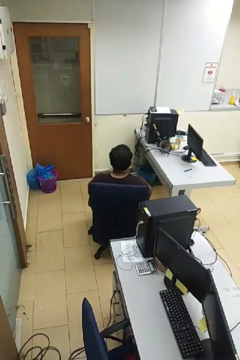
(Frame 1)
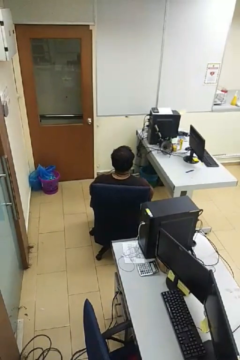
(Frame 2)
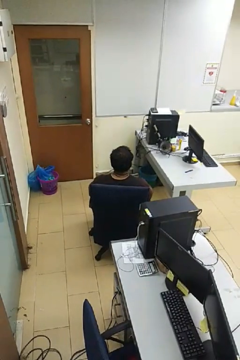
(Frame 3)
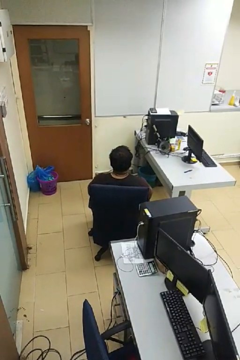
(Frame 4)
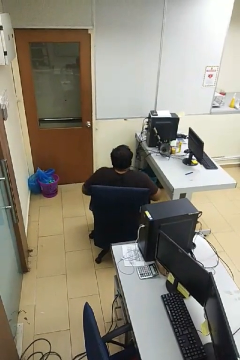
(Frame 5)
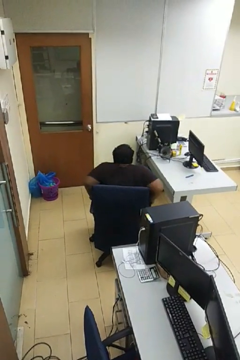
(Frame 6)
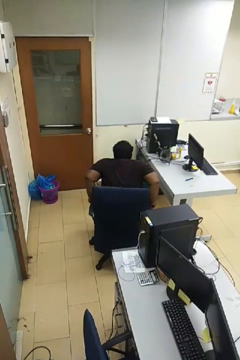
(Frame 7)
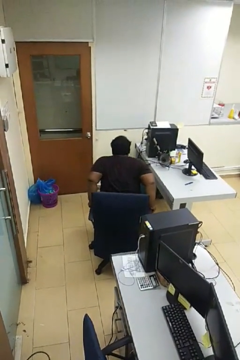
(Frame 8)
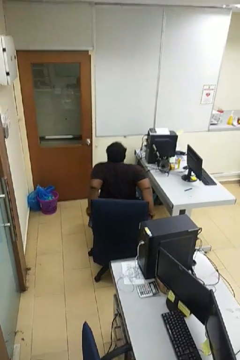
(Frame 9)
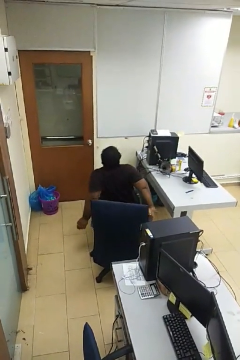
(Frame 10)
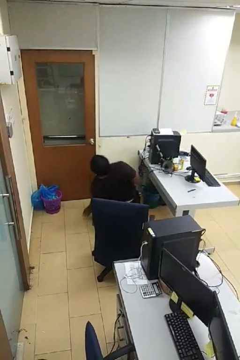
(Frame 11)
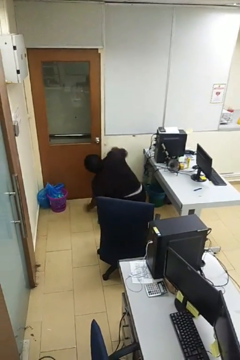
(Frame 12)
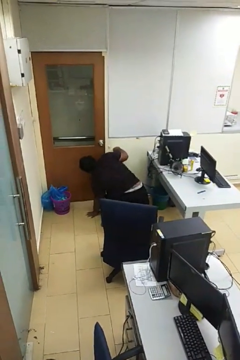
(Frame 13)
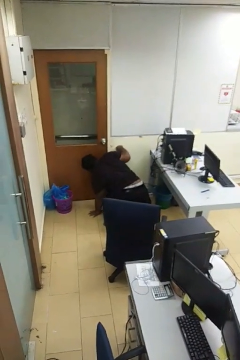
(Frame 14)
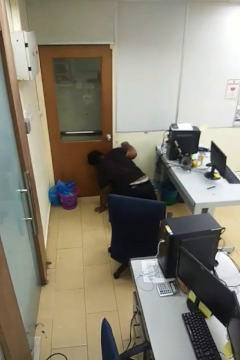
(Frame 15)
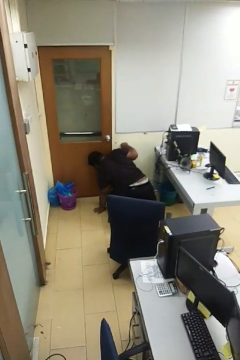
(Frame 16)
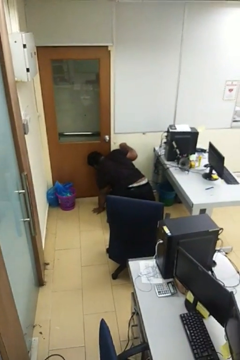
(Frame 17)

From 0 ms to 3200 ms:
person falls from chair

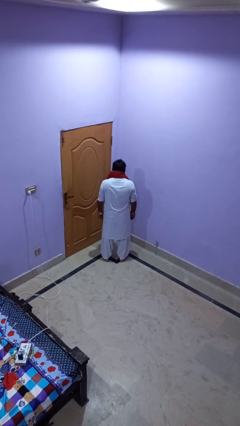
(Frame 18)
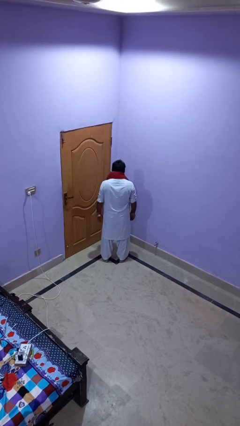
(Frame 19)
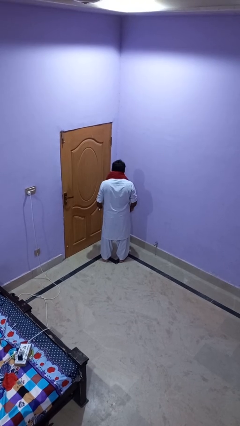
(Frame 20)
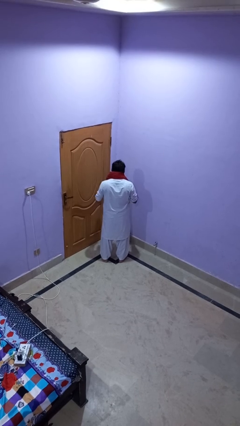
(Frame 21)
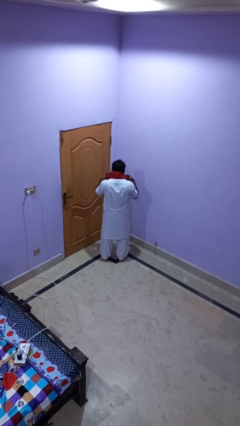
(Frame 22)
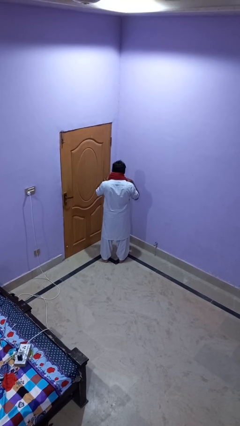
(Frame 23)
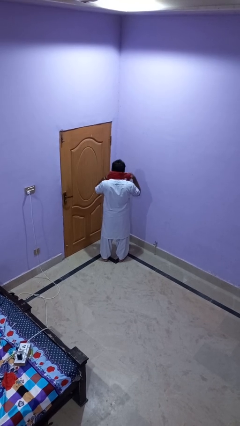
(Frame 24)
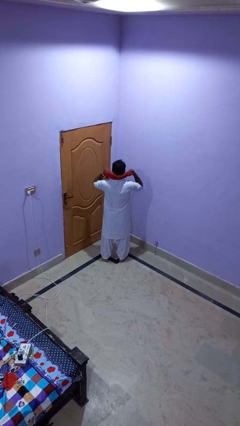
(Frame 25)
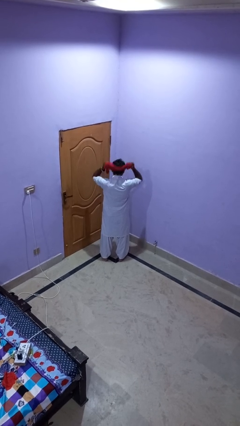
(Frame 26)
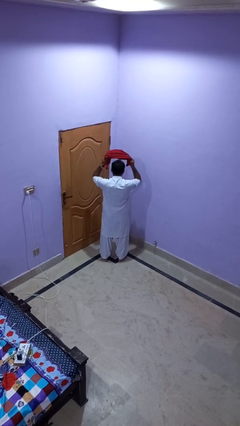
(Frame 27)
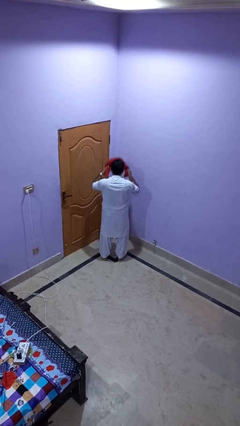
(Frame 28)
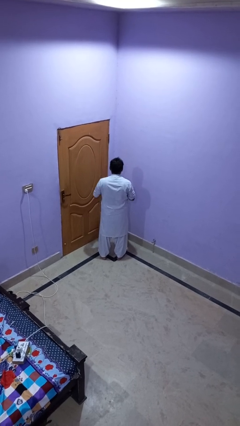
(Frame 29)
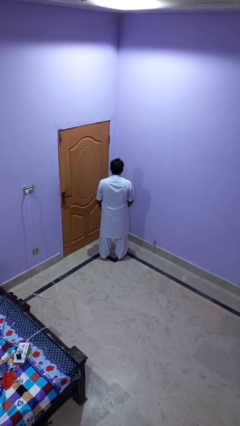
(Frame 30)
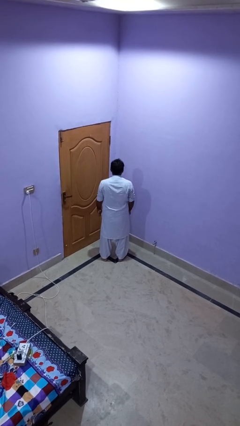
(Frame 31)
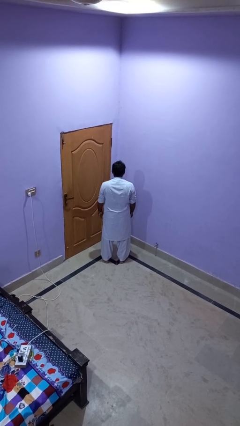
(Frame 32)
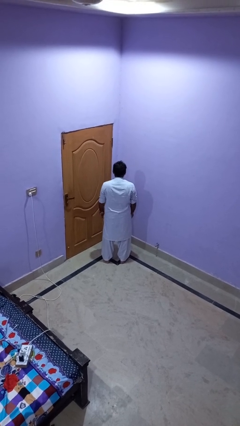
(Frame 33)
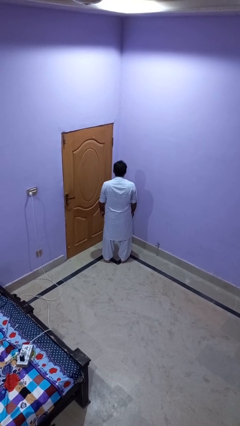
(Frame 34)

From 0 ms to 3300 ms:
person takes off scarf

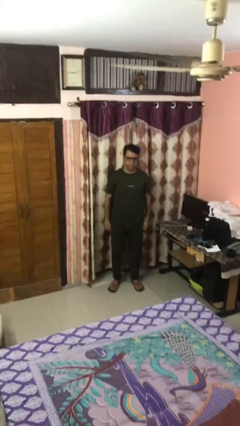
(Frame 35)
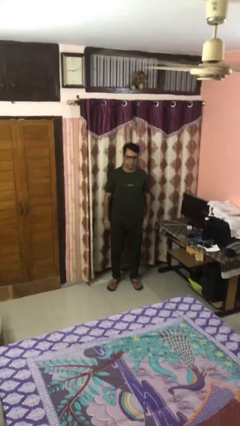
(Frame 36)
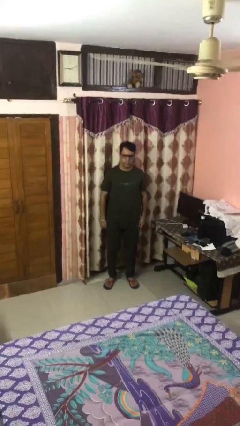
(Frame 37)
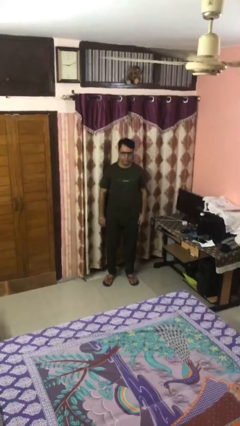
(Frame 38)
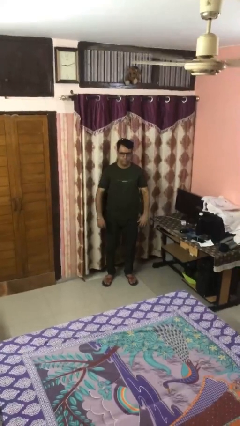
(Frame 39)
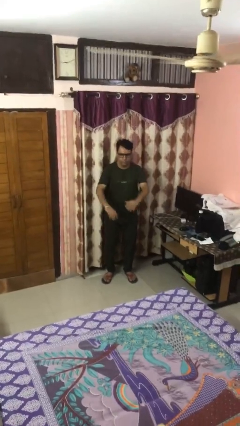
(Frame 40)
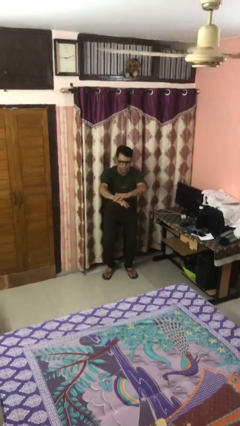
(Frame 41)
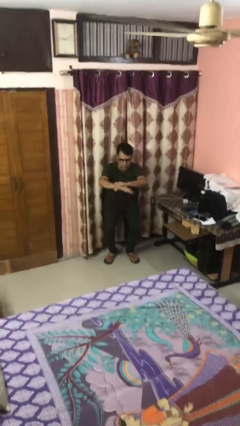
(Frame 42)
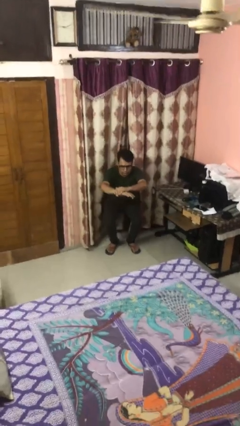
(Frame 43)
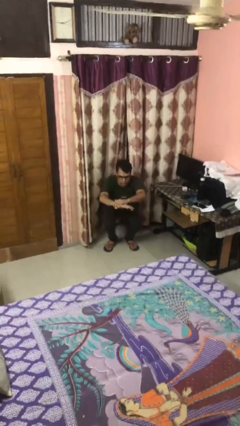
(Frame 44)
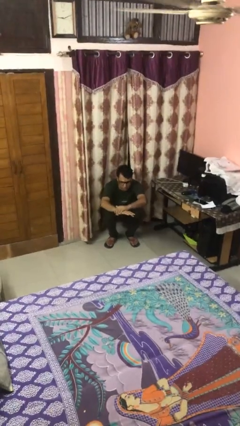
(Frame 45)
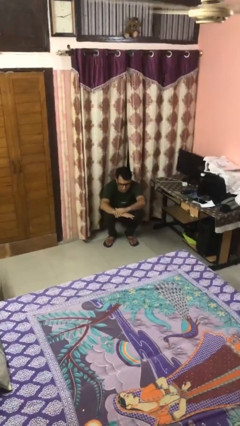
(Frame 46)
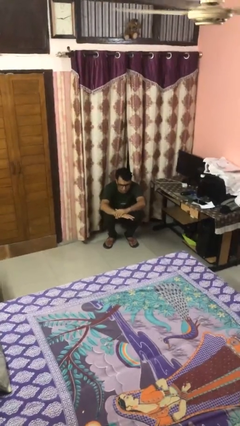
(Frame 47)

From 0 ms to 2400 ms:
person squats

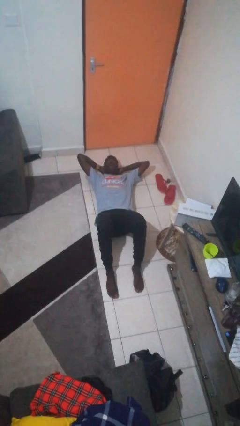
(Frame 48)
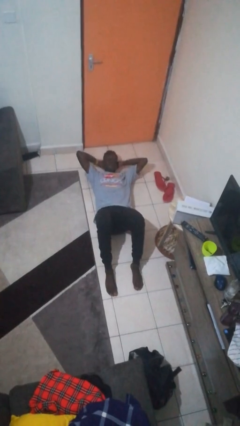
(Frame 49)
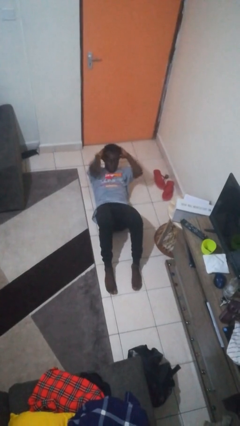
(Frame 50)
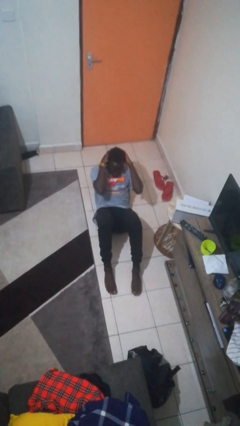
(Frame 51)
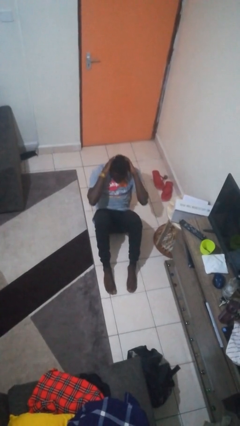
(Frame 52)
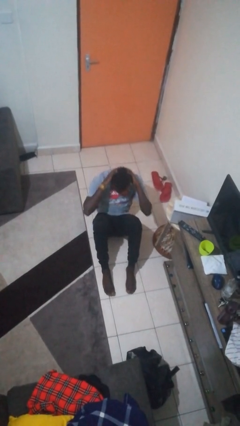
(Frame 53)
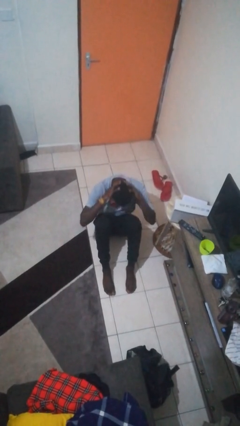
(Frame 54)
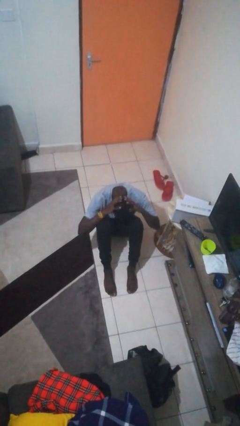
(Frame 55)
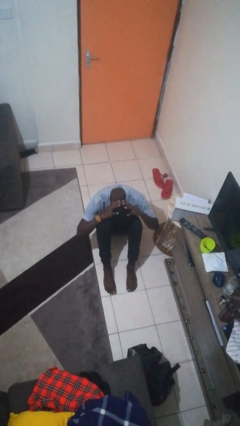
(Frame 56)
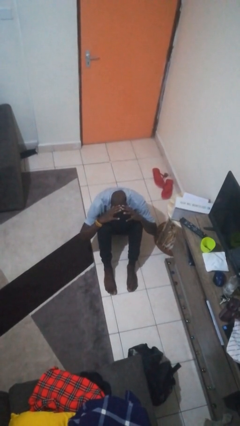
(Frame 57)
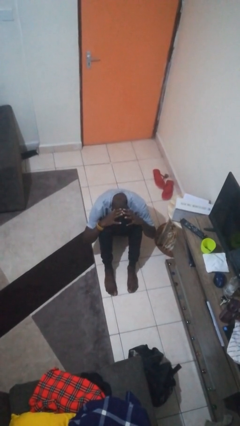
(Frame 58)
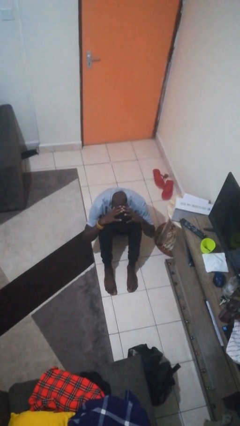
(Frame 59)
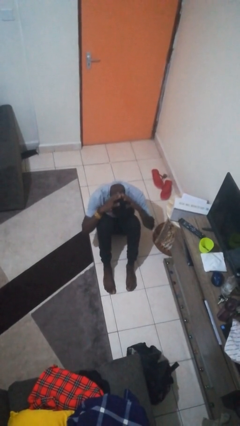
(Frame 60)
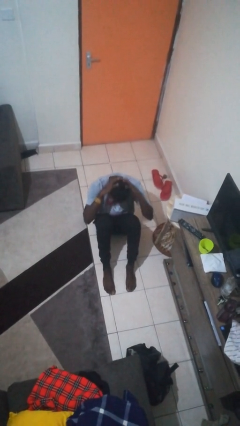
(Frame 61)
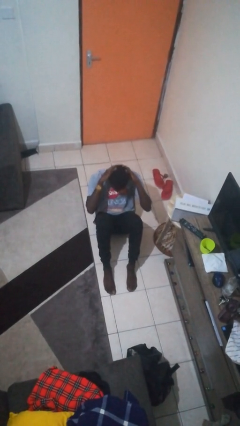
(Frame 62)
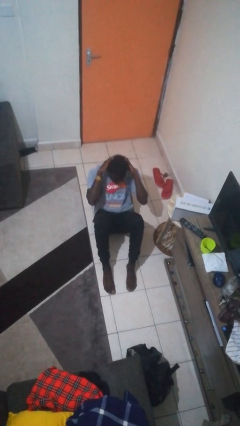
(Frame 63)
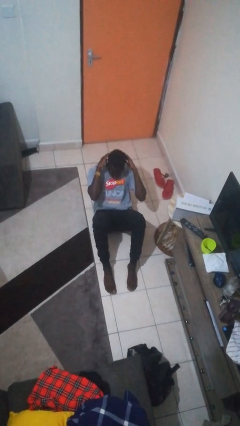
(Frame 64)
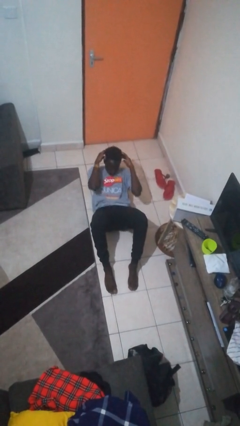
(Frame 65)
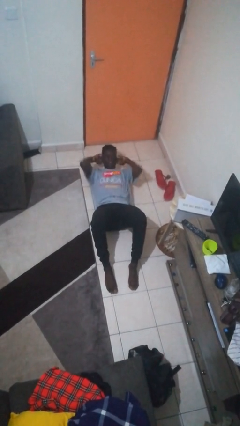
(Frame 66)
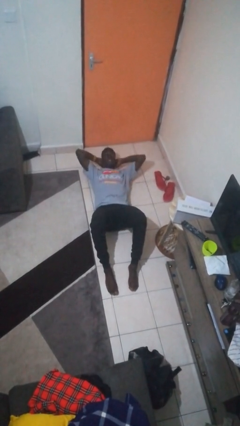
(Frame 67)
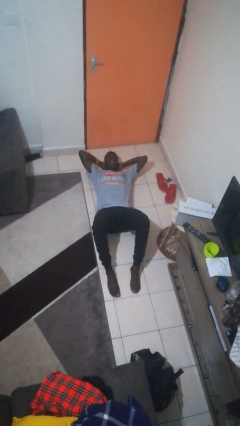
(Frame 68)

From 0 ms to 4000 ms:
person exercises with situp

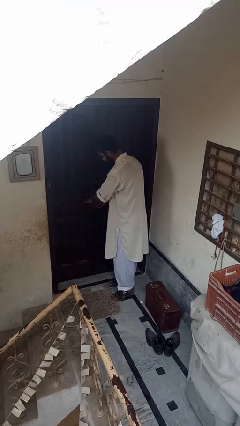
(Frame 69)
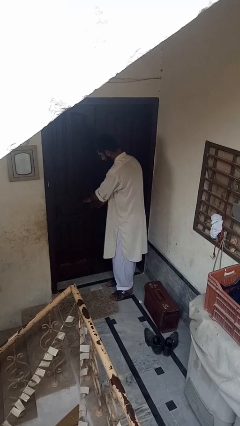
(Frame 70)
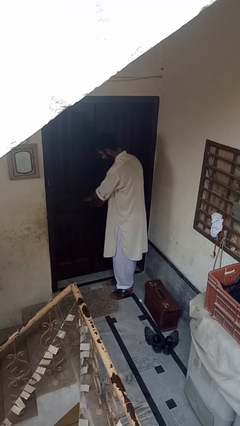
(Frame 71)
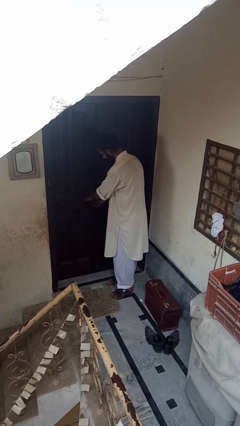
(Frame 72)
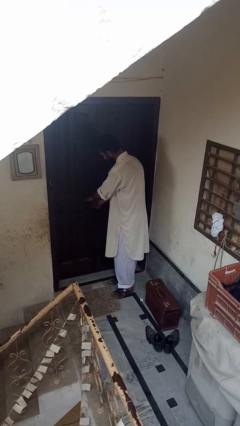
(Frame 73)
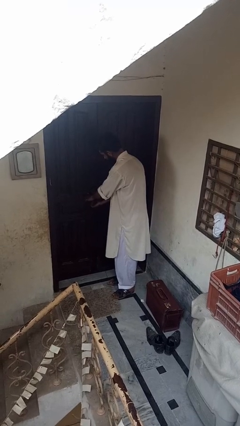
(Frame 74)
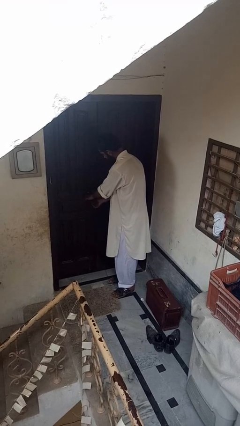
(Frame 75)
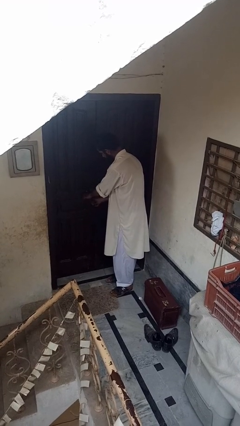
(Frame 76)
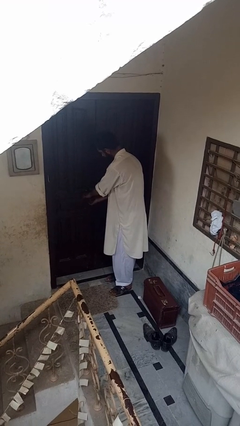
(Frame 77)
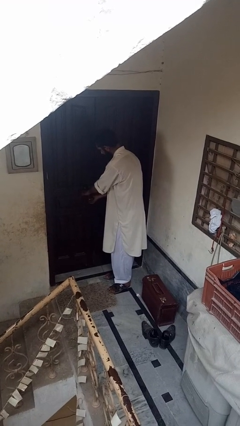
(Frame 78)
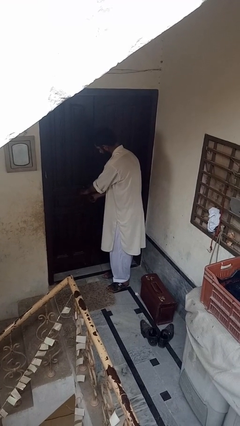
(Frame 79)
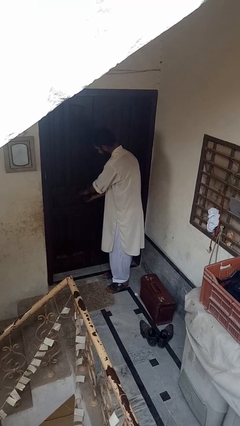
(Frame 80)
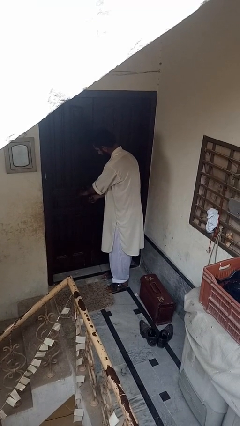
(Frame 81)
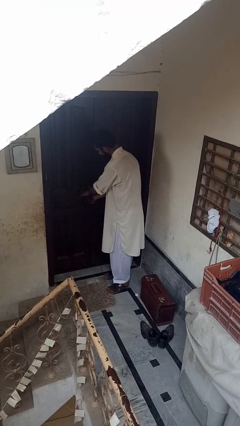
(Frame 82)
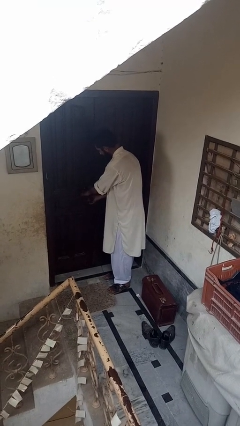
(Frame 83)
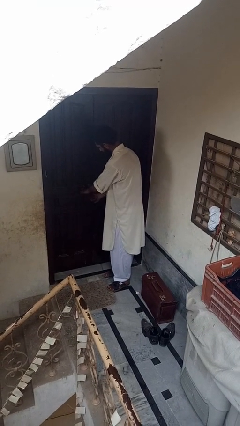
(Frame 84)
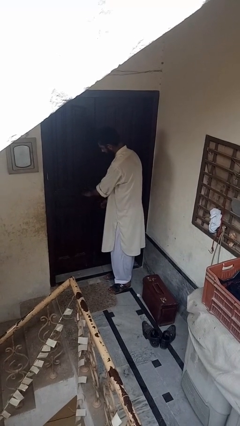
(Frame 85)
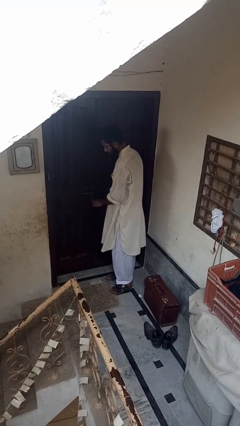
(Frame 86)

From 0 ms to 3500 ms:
person locks door with keys

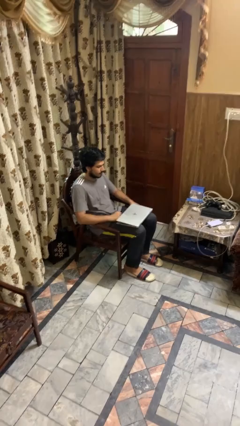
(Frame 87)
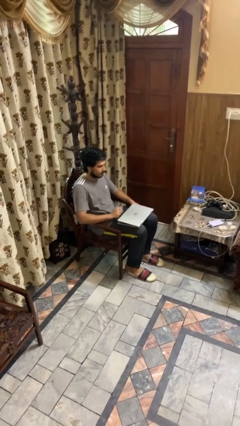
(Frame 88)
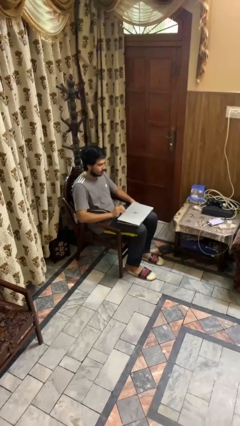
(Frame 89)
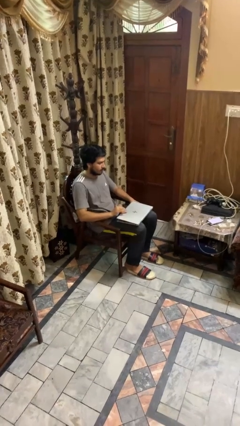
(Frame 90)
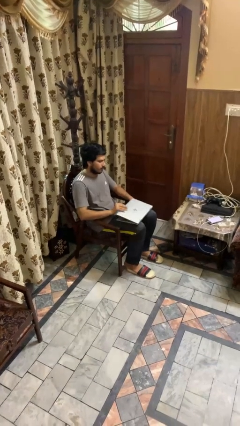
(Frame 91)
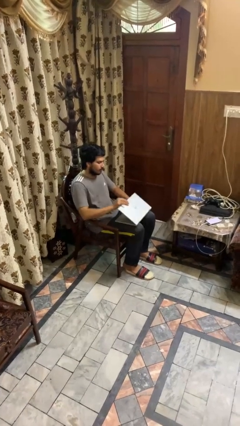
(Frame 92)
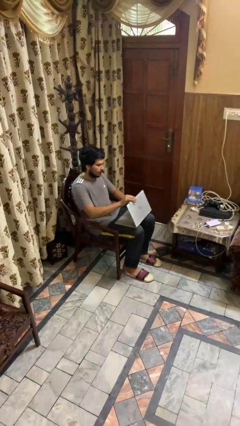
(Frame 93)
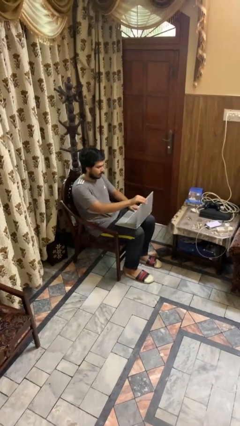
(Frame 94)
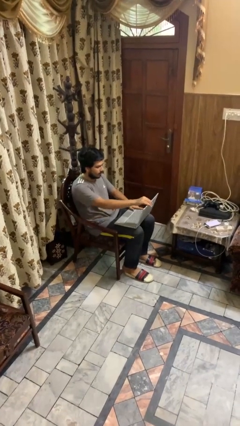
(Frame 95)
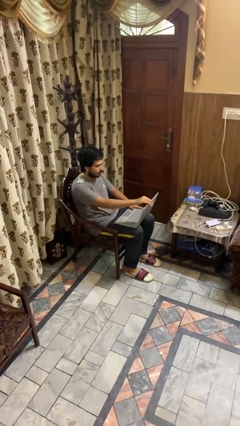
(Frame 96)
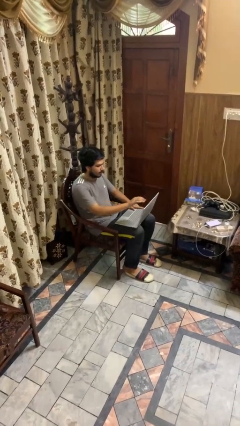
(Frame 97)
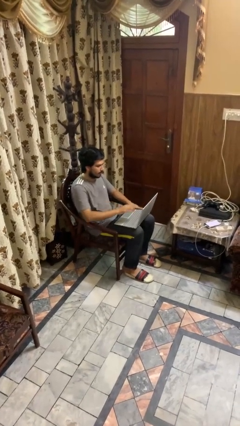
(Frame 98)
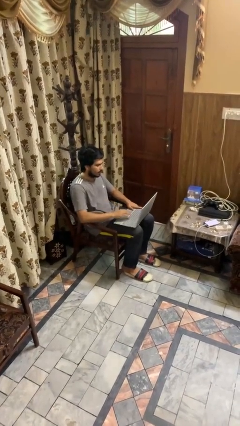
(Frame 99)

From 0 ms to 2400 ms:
person opens laptop
